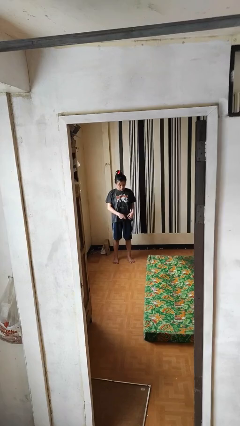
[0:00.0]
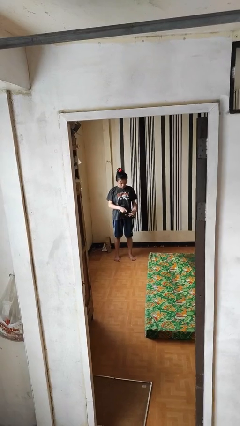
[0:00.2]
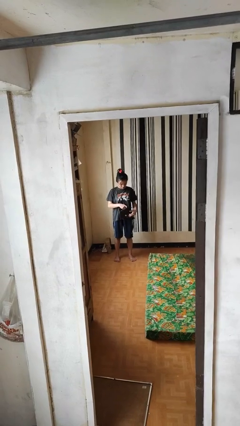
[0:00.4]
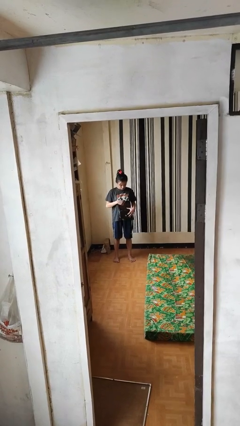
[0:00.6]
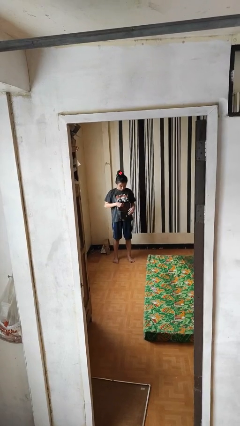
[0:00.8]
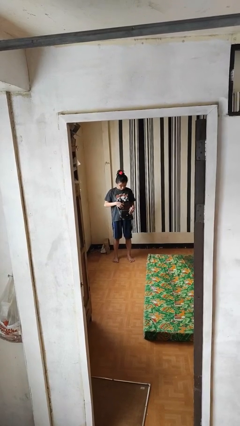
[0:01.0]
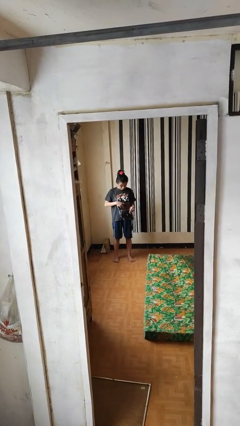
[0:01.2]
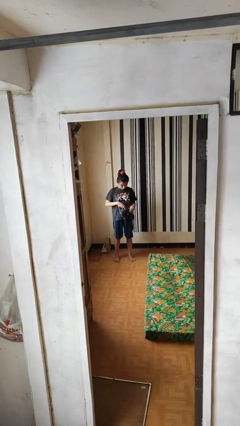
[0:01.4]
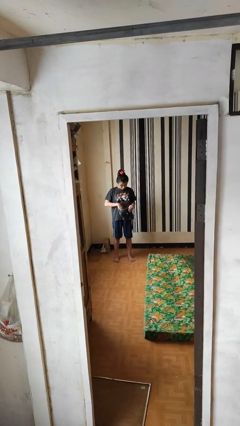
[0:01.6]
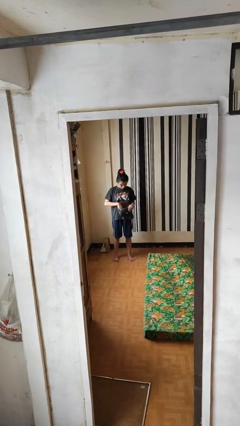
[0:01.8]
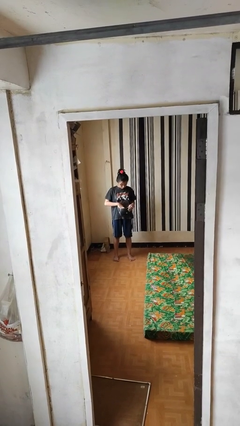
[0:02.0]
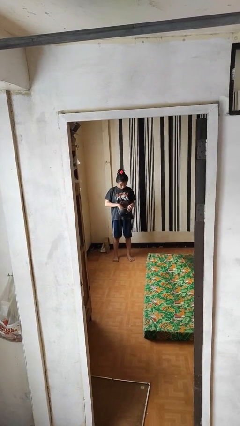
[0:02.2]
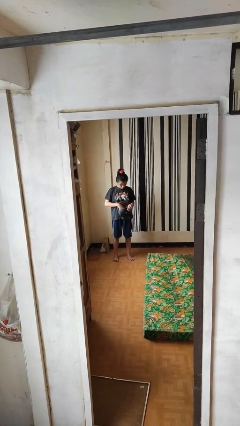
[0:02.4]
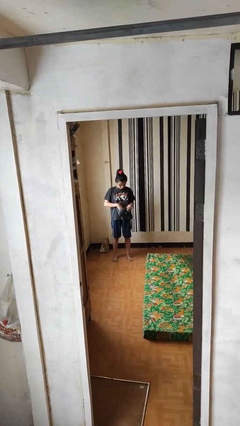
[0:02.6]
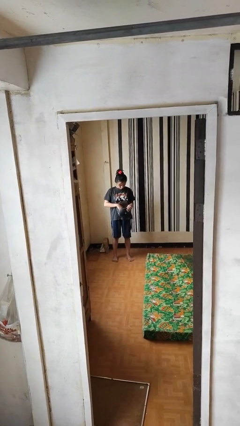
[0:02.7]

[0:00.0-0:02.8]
person searches in purse

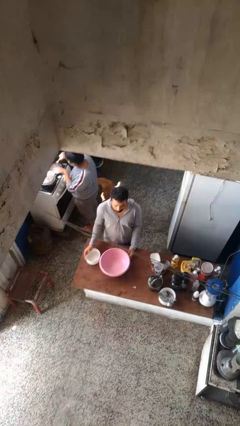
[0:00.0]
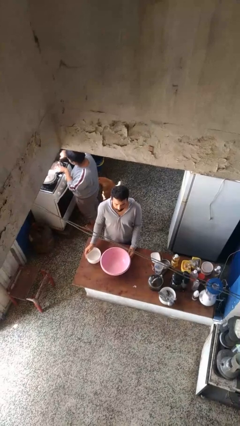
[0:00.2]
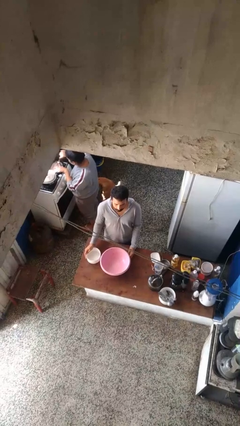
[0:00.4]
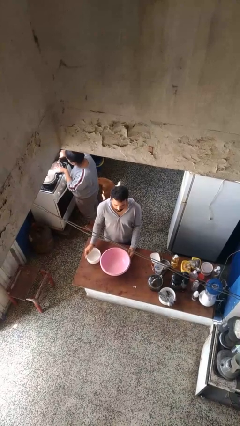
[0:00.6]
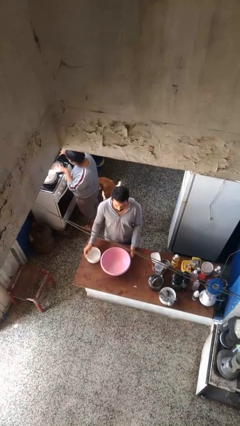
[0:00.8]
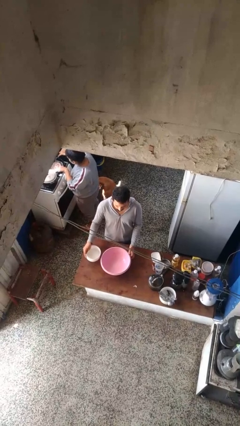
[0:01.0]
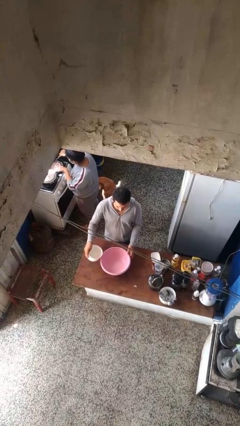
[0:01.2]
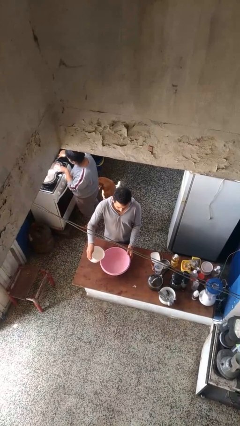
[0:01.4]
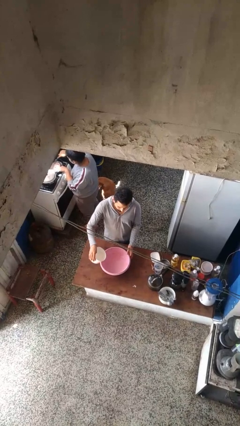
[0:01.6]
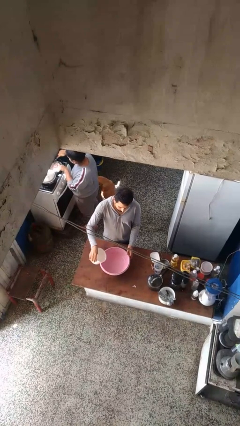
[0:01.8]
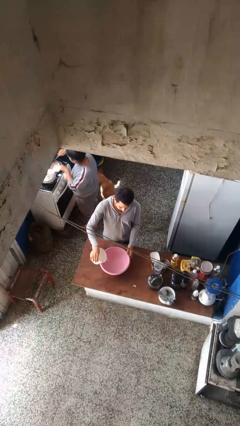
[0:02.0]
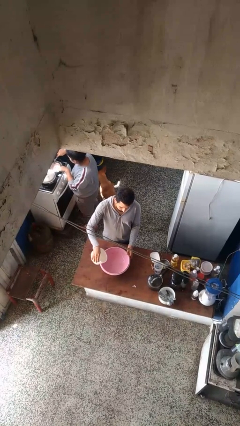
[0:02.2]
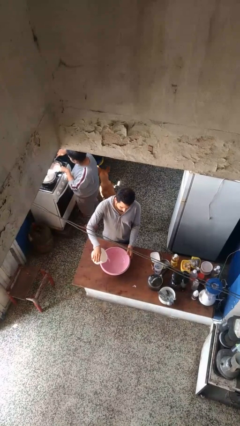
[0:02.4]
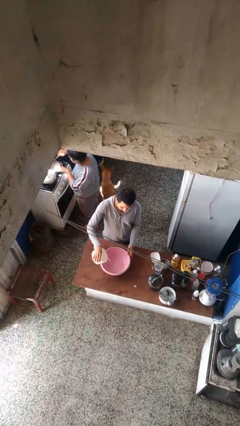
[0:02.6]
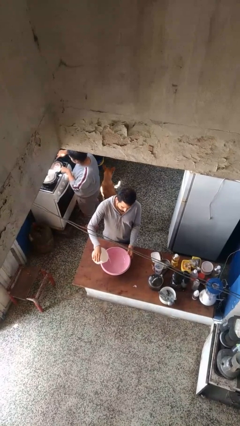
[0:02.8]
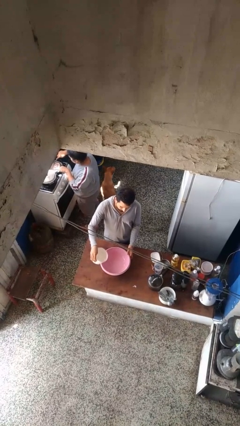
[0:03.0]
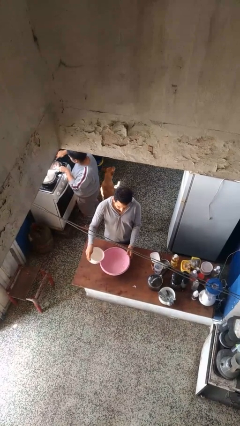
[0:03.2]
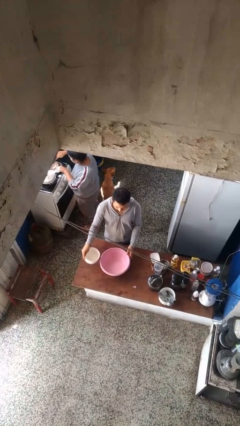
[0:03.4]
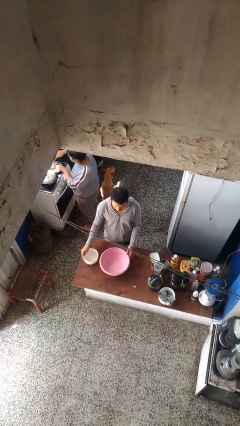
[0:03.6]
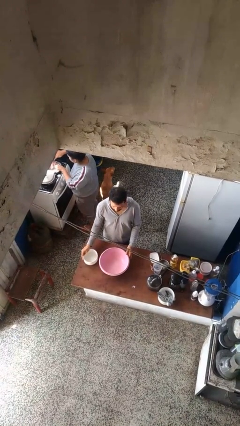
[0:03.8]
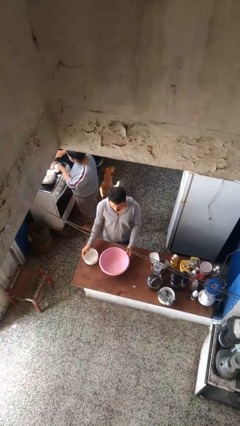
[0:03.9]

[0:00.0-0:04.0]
person pours into bowl

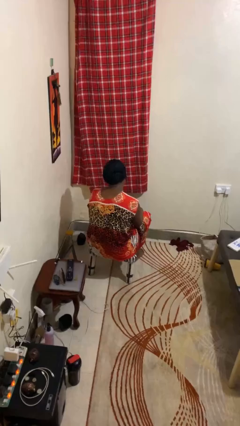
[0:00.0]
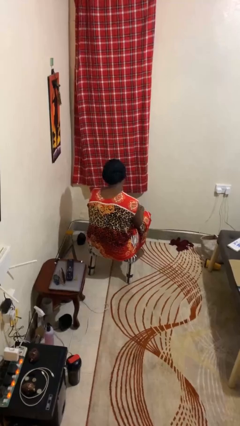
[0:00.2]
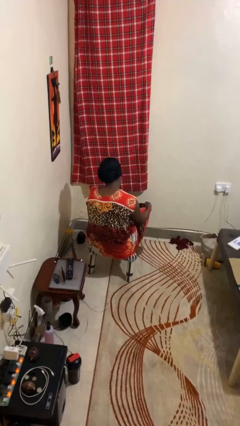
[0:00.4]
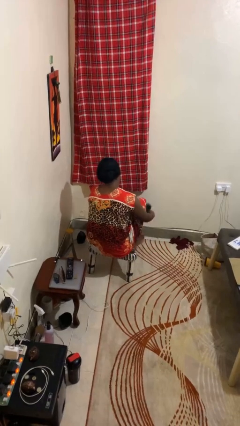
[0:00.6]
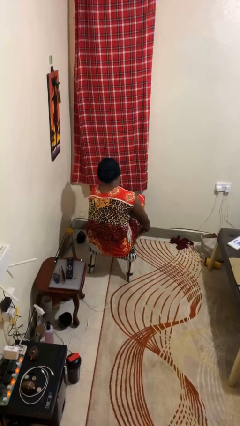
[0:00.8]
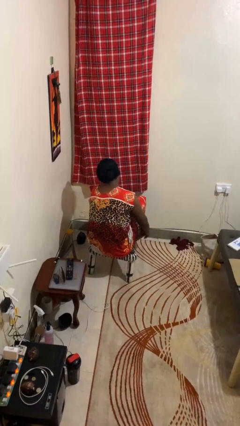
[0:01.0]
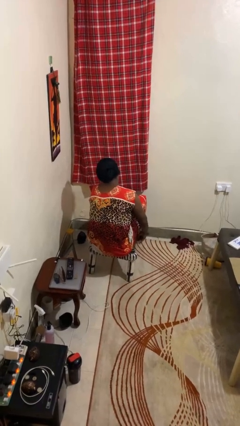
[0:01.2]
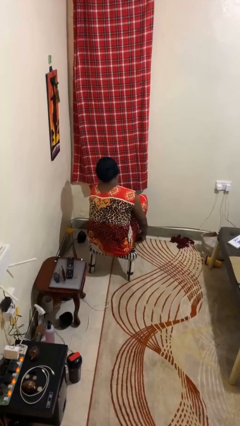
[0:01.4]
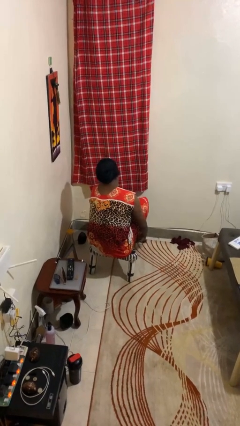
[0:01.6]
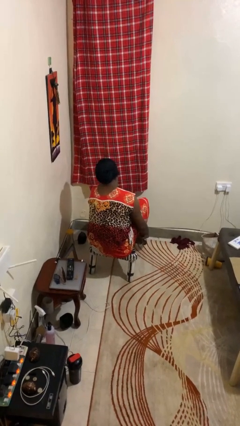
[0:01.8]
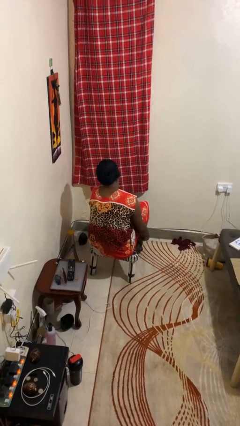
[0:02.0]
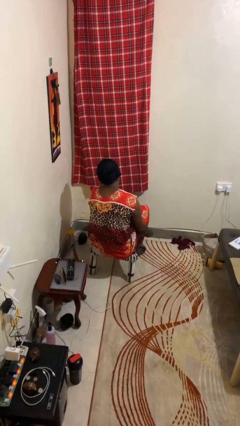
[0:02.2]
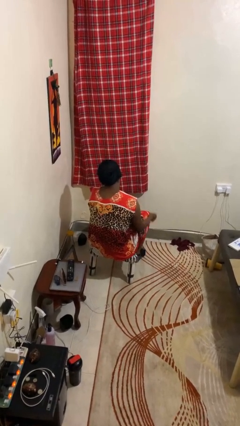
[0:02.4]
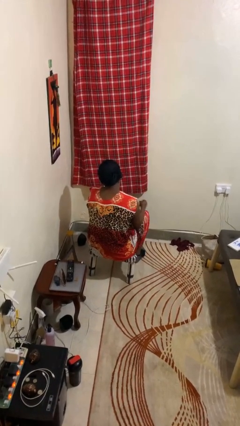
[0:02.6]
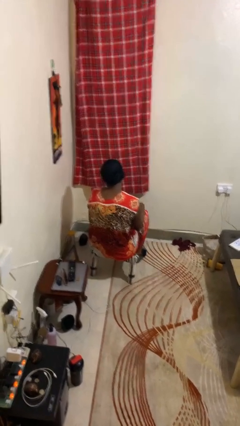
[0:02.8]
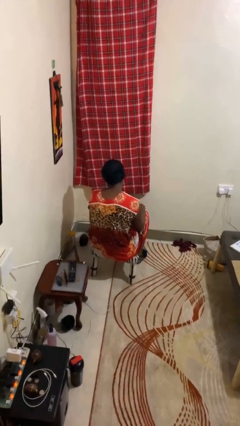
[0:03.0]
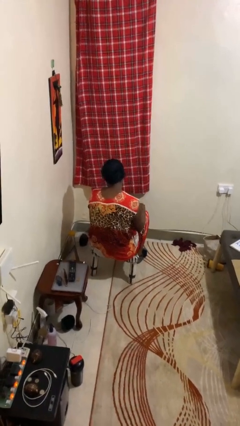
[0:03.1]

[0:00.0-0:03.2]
person puts on socks

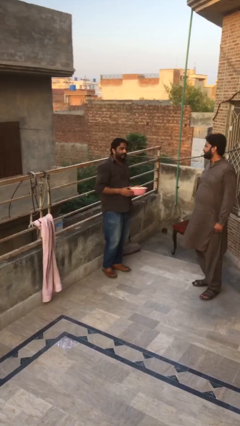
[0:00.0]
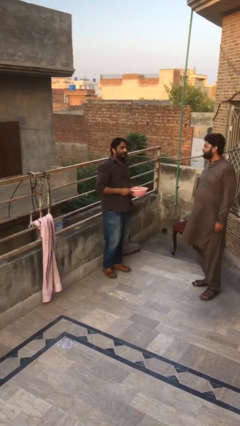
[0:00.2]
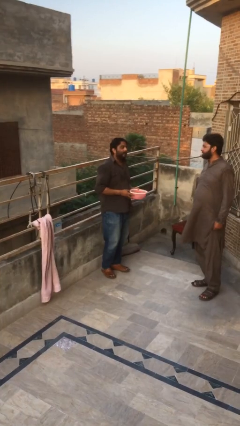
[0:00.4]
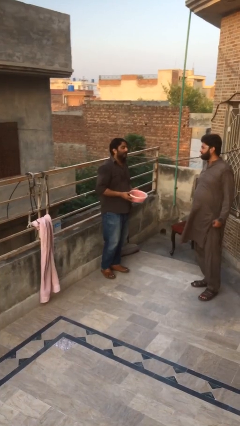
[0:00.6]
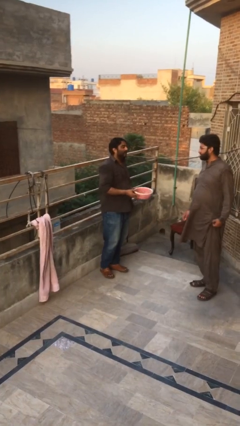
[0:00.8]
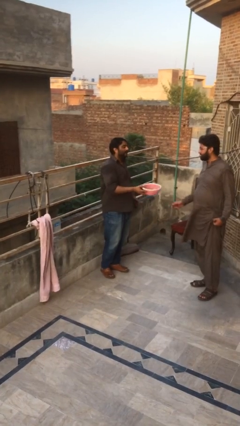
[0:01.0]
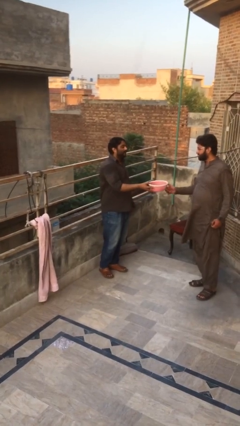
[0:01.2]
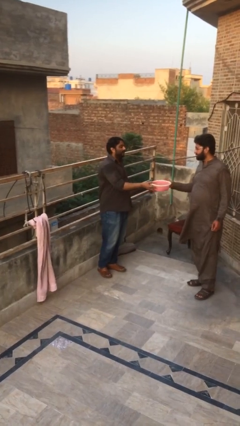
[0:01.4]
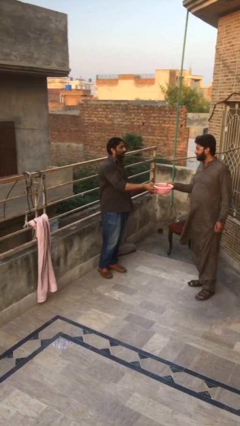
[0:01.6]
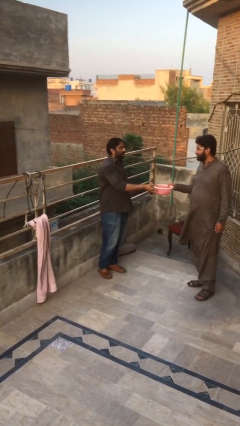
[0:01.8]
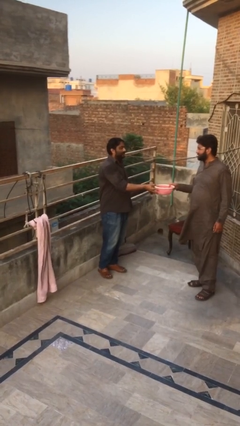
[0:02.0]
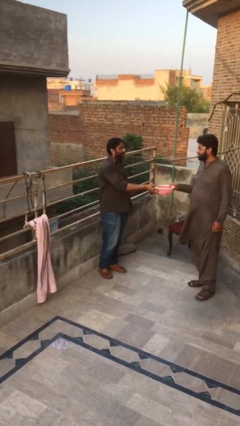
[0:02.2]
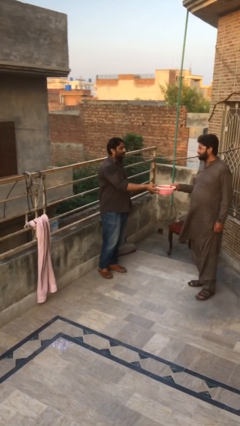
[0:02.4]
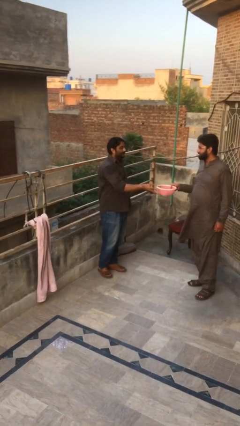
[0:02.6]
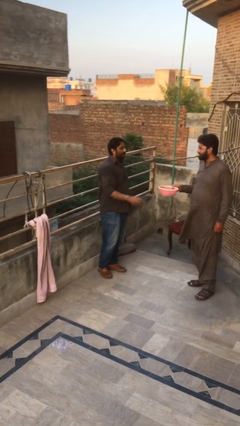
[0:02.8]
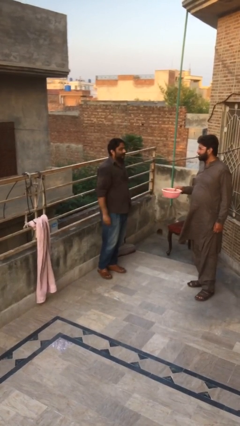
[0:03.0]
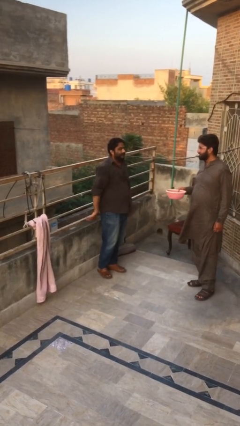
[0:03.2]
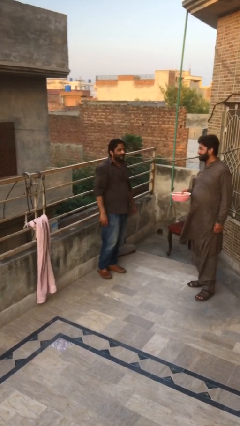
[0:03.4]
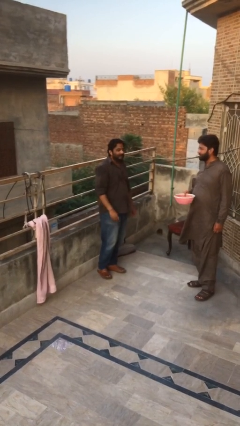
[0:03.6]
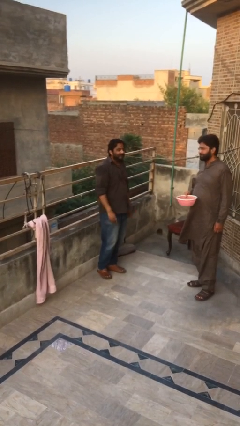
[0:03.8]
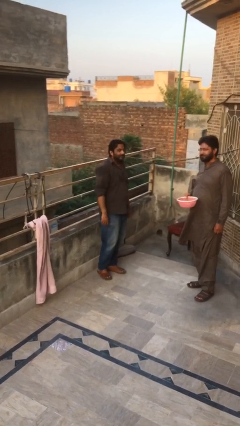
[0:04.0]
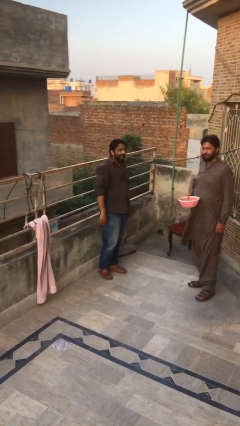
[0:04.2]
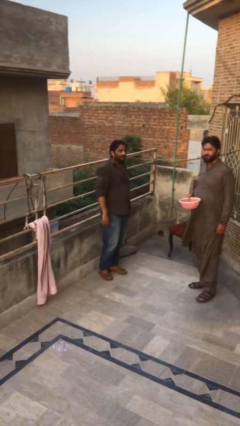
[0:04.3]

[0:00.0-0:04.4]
person transfers object to person

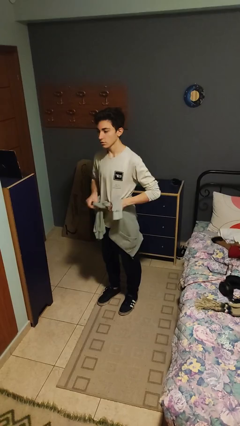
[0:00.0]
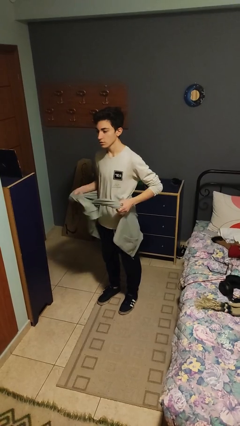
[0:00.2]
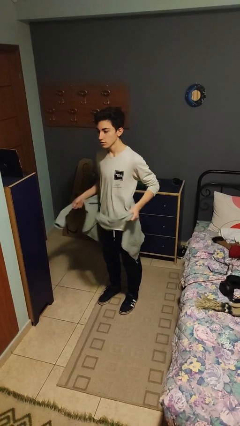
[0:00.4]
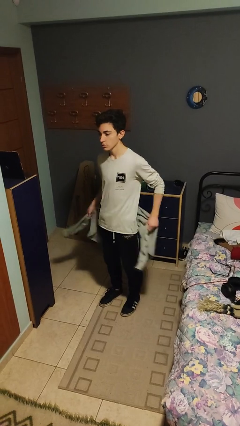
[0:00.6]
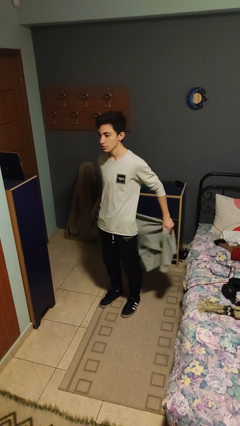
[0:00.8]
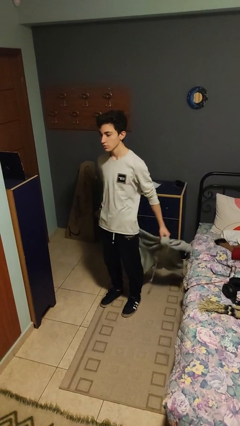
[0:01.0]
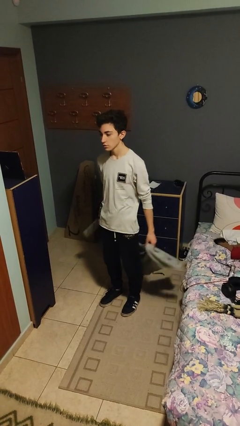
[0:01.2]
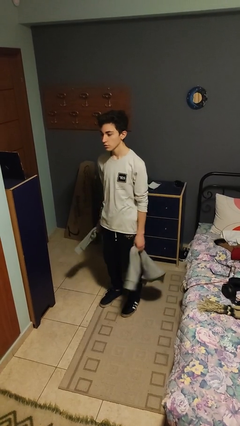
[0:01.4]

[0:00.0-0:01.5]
person unties jacket around waist

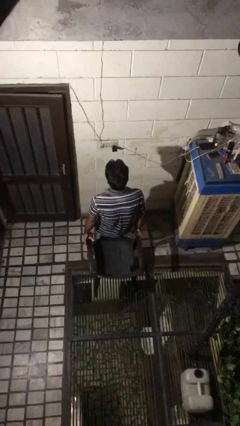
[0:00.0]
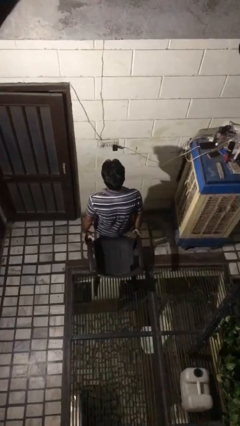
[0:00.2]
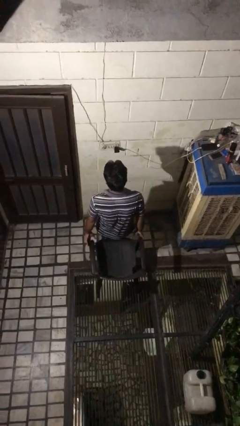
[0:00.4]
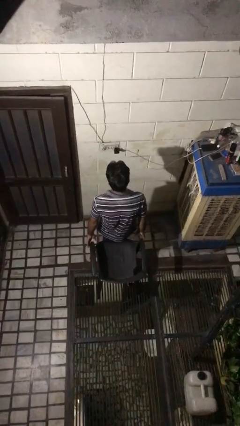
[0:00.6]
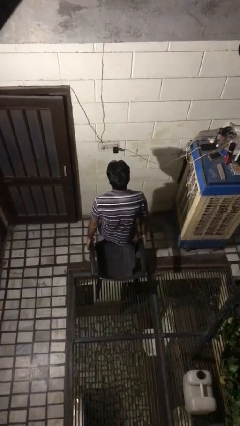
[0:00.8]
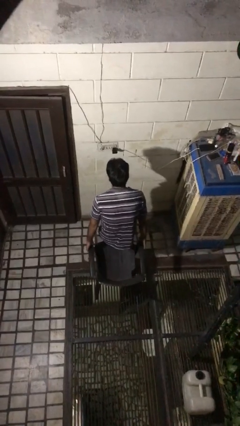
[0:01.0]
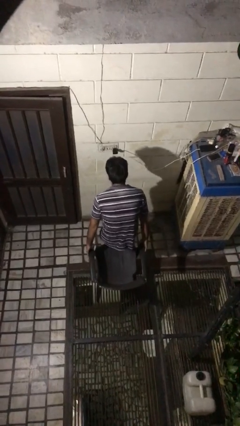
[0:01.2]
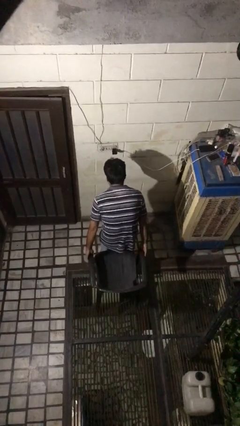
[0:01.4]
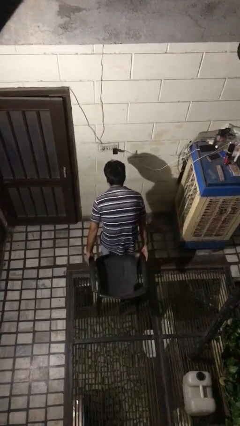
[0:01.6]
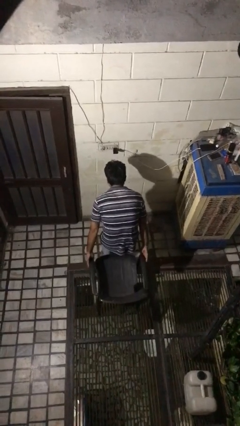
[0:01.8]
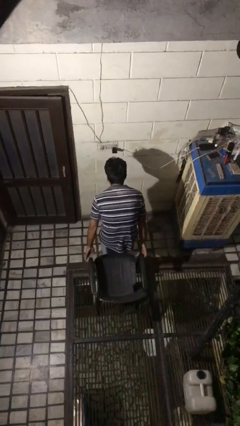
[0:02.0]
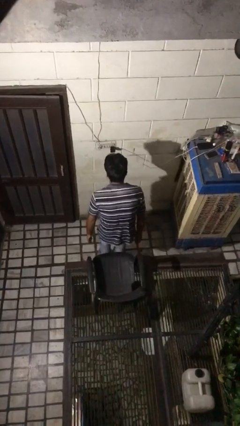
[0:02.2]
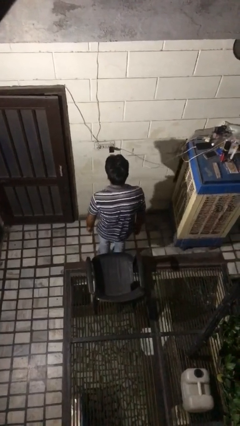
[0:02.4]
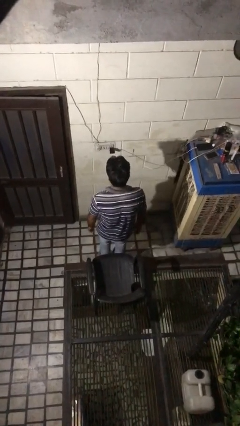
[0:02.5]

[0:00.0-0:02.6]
person pushes in chair
